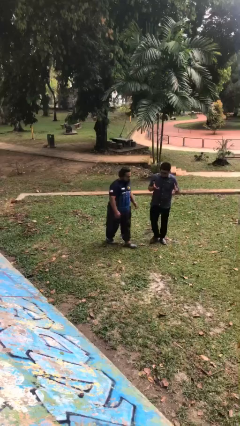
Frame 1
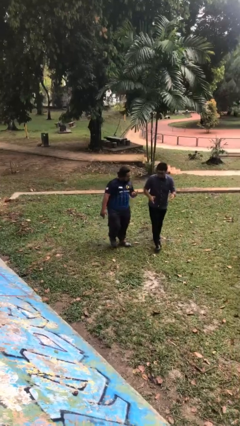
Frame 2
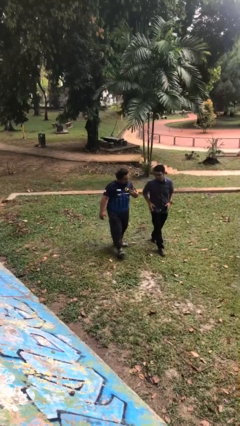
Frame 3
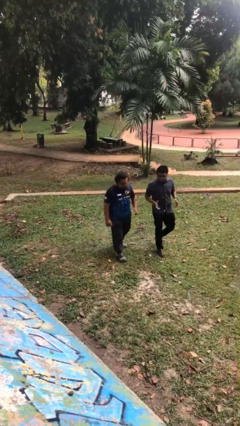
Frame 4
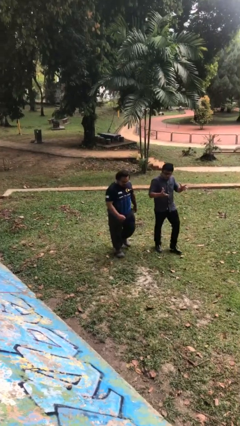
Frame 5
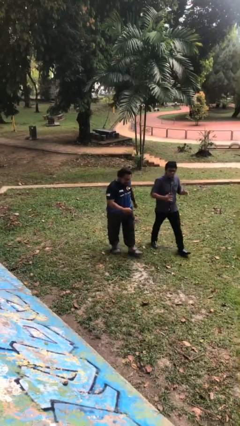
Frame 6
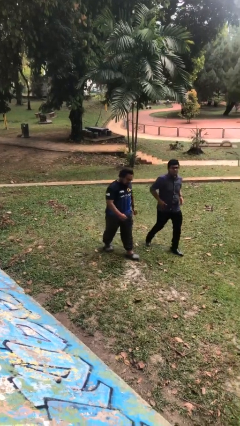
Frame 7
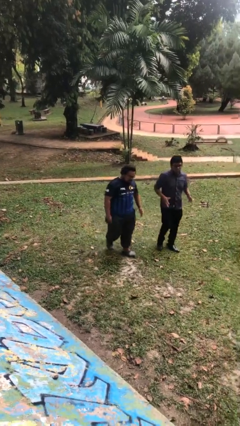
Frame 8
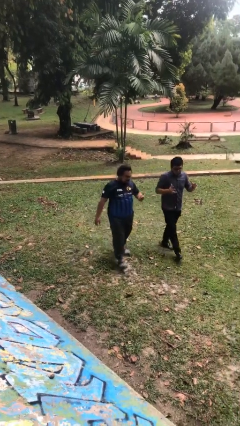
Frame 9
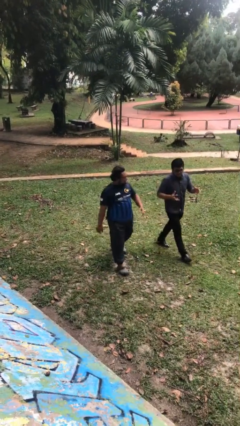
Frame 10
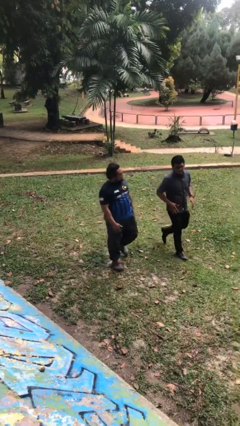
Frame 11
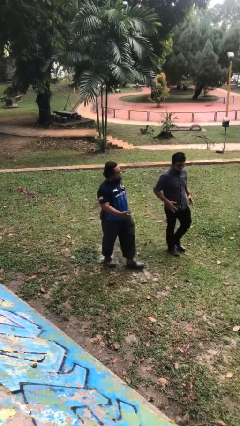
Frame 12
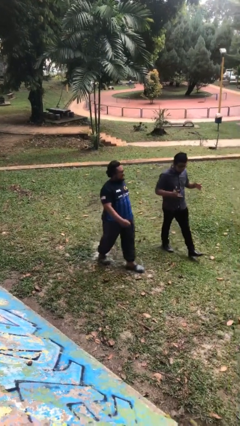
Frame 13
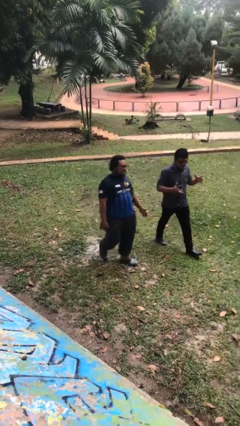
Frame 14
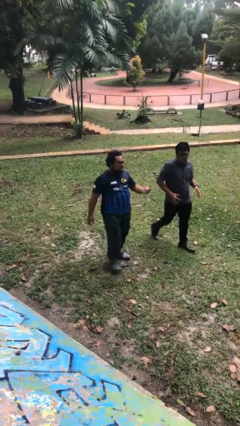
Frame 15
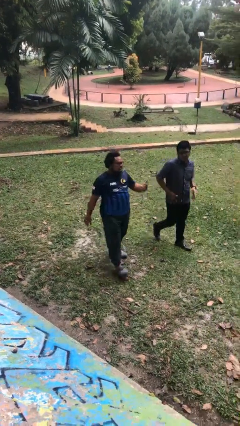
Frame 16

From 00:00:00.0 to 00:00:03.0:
person talks to person

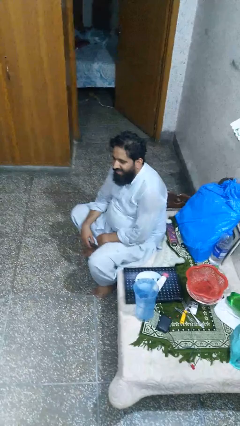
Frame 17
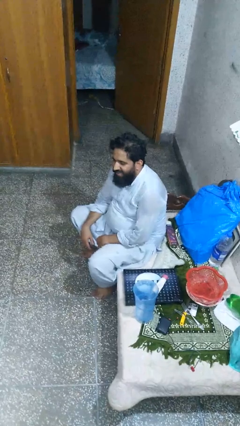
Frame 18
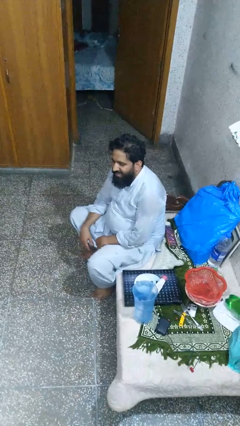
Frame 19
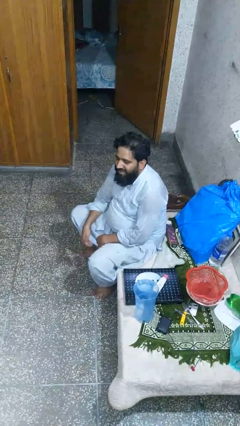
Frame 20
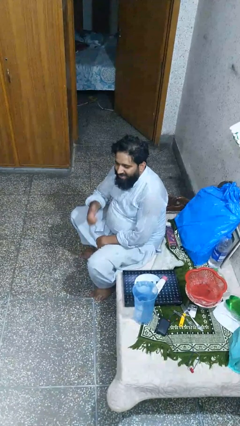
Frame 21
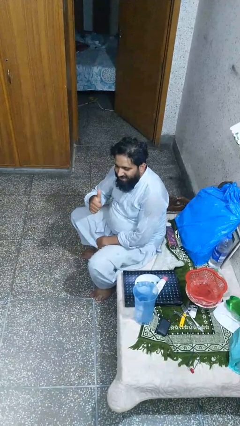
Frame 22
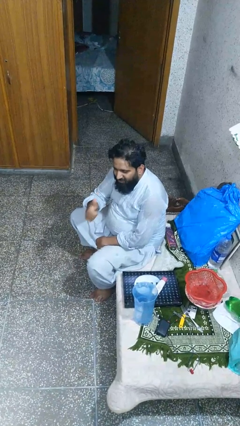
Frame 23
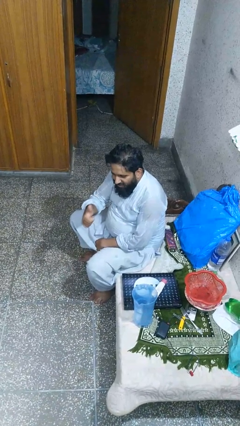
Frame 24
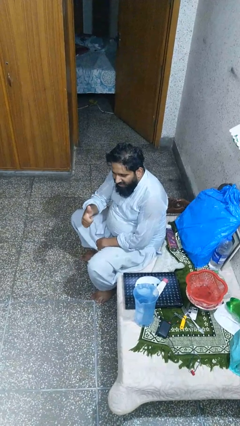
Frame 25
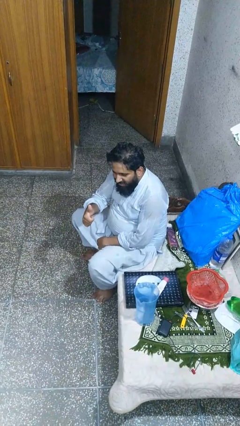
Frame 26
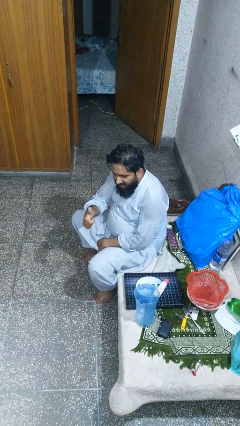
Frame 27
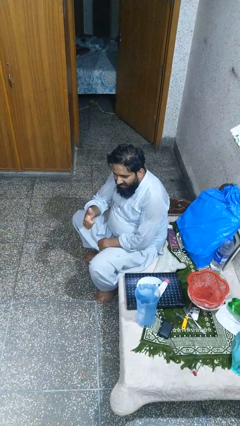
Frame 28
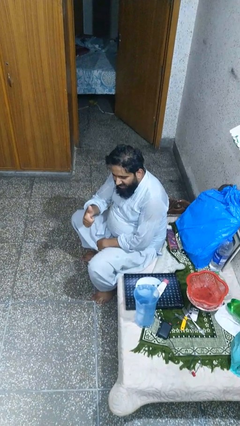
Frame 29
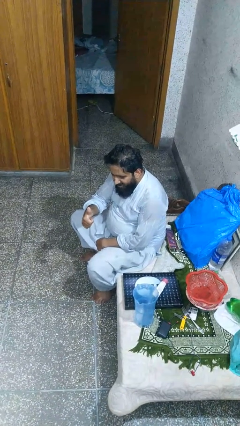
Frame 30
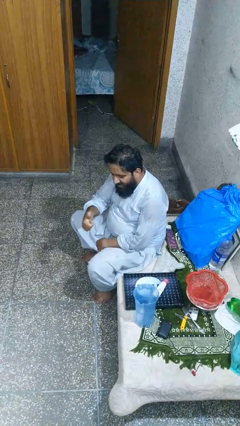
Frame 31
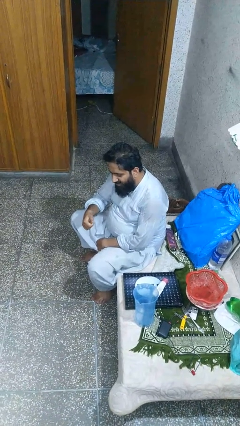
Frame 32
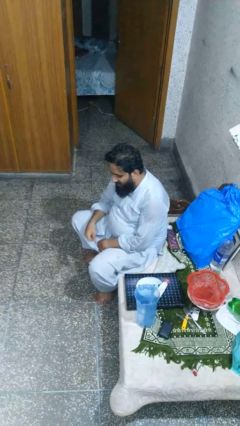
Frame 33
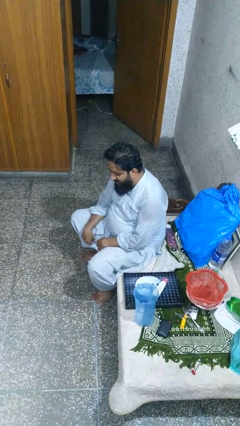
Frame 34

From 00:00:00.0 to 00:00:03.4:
person gestures thumbs up

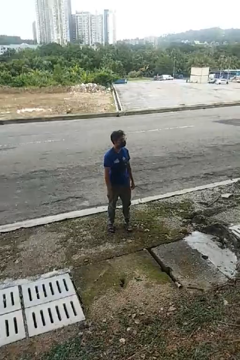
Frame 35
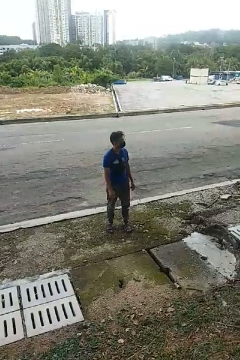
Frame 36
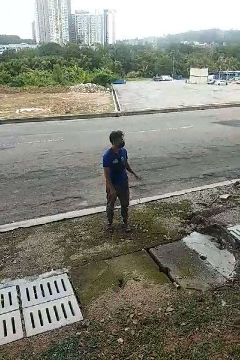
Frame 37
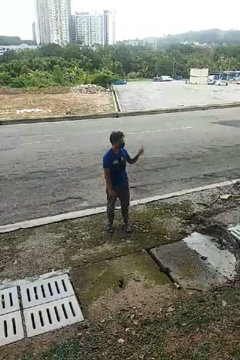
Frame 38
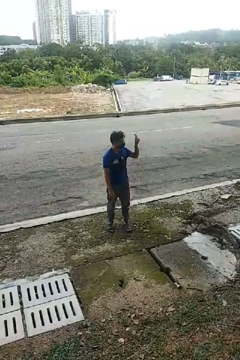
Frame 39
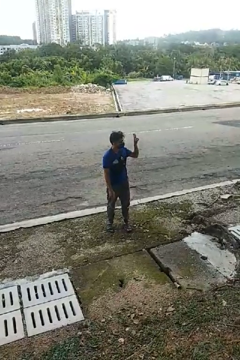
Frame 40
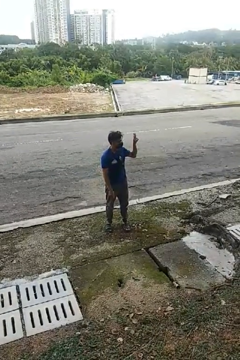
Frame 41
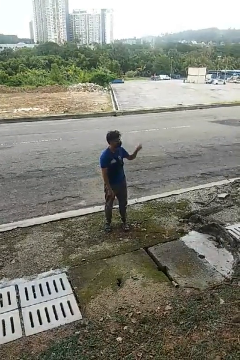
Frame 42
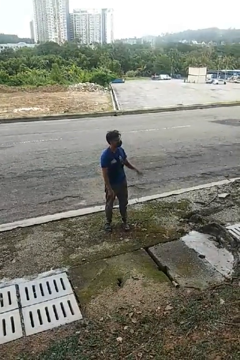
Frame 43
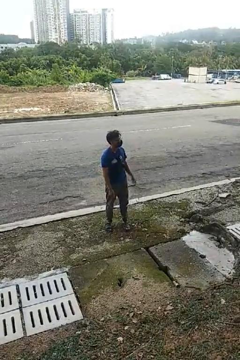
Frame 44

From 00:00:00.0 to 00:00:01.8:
person gestures number three

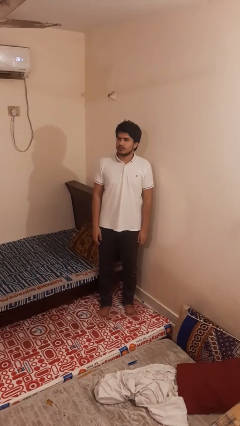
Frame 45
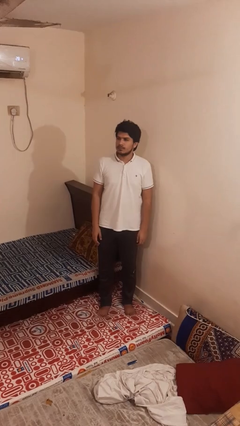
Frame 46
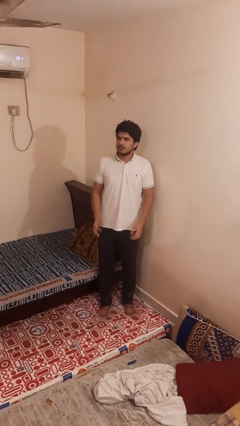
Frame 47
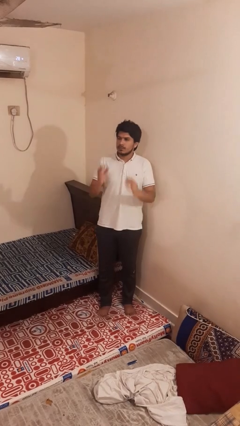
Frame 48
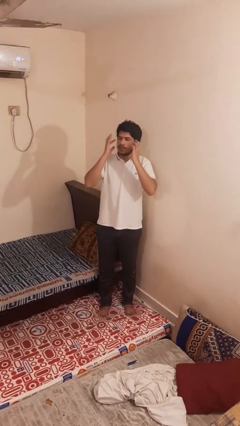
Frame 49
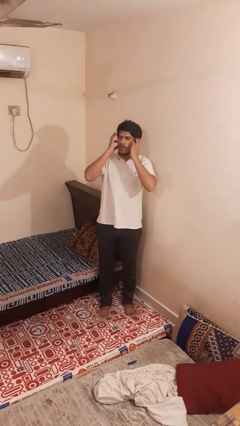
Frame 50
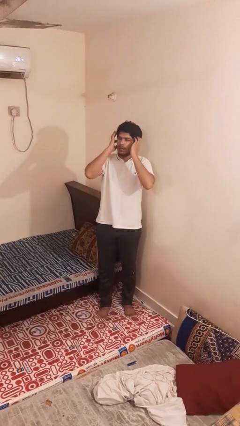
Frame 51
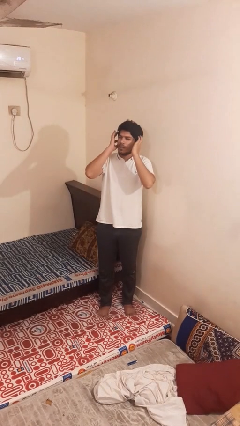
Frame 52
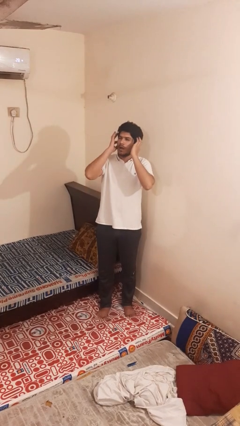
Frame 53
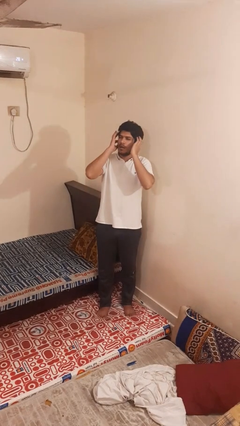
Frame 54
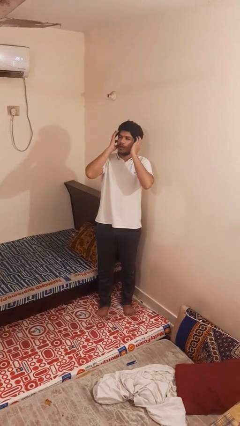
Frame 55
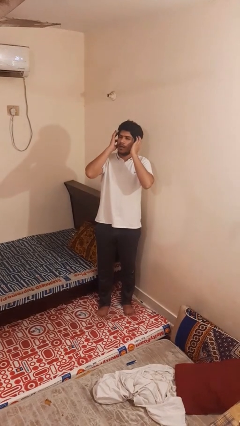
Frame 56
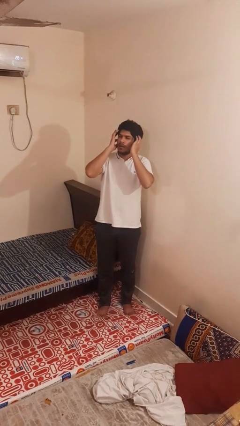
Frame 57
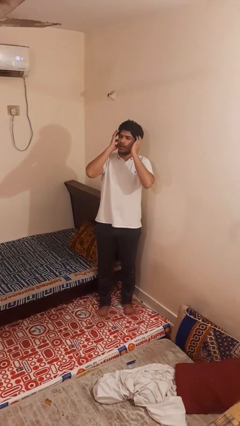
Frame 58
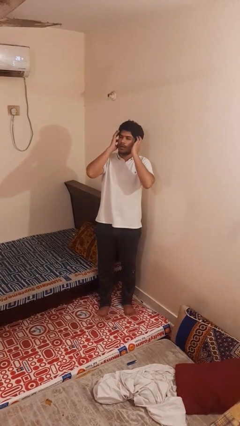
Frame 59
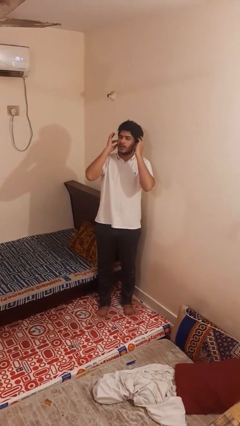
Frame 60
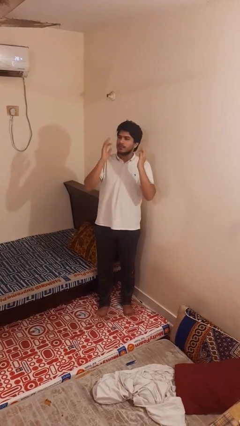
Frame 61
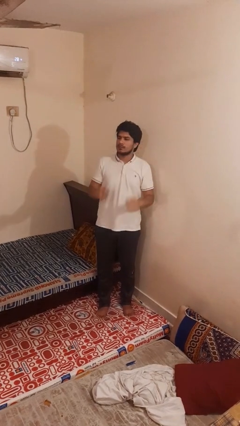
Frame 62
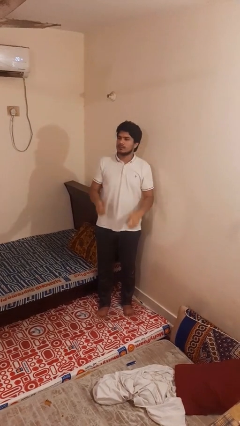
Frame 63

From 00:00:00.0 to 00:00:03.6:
person puts fingers in ear

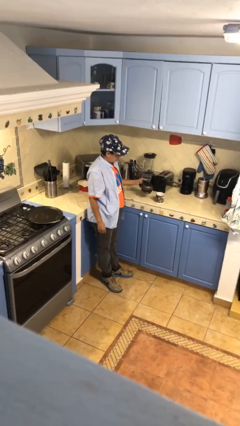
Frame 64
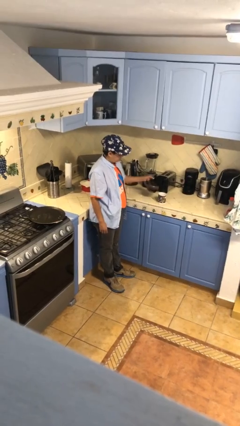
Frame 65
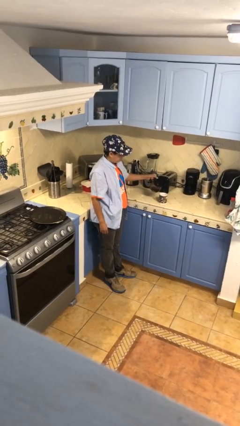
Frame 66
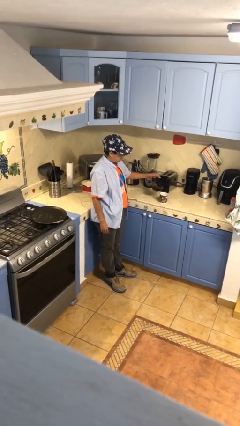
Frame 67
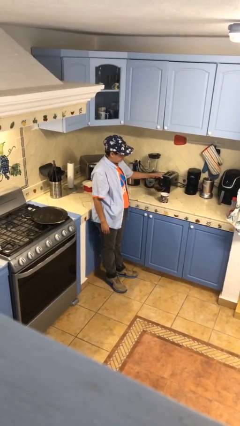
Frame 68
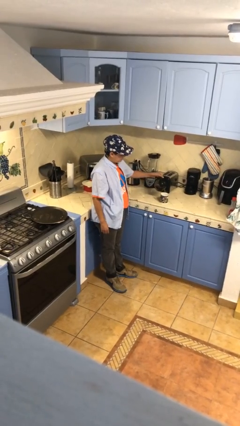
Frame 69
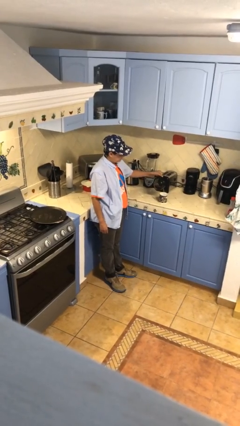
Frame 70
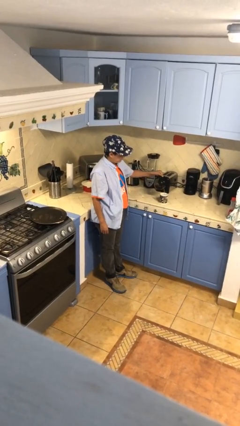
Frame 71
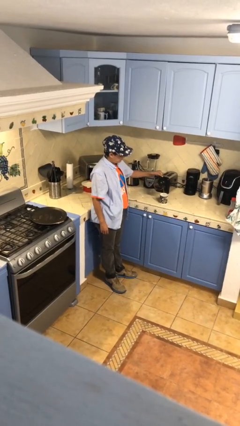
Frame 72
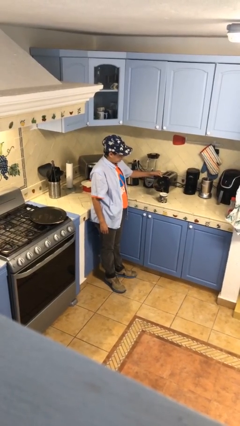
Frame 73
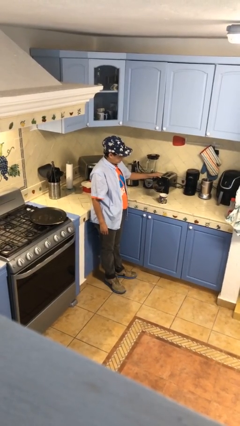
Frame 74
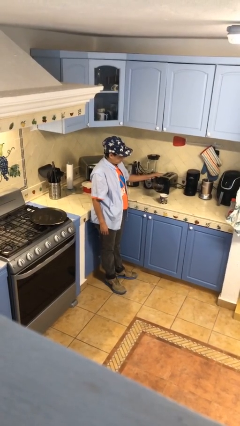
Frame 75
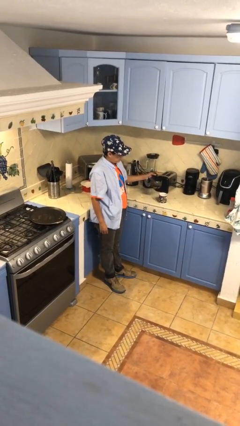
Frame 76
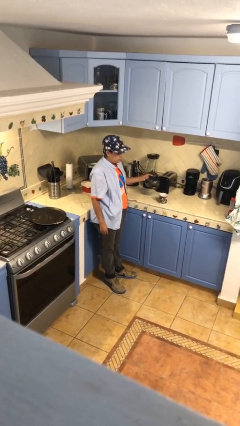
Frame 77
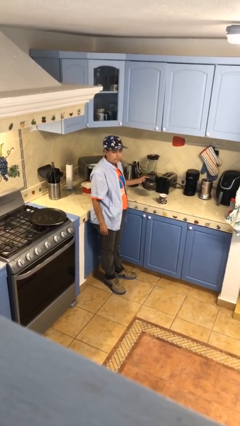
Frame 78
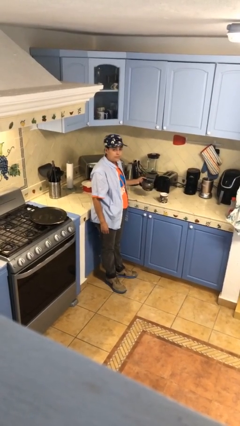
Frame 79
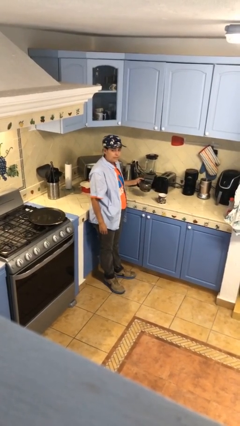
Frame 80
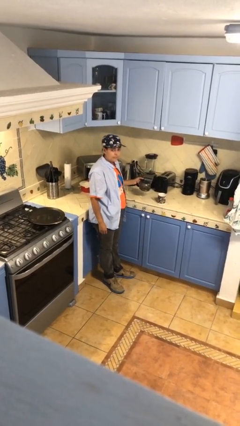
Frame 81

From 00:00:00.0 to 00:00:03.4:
person pours coffee into mug

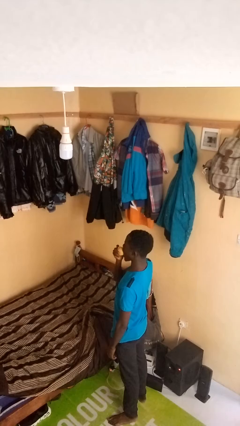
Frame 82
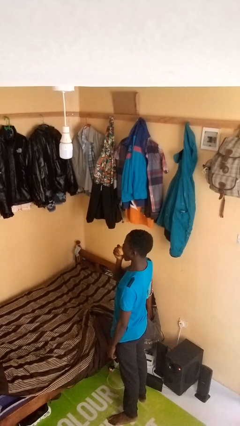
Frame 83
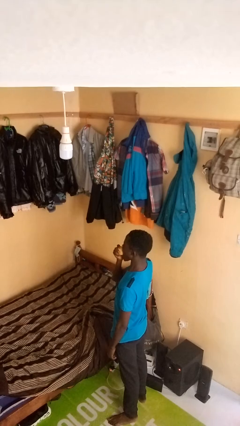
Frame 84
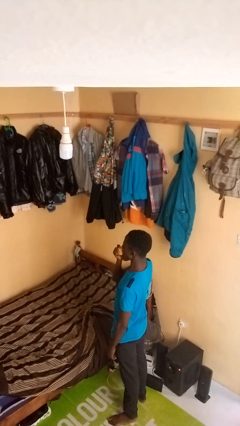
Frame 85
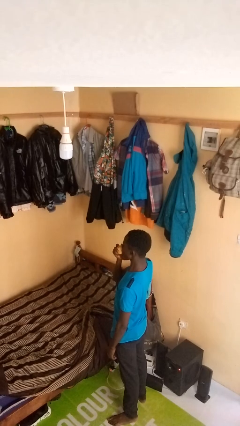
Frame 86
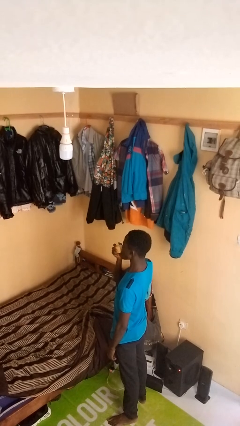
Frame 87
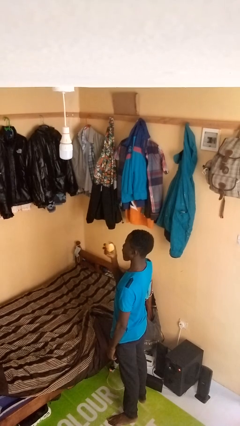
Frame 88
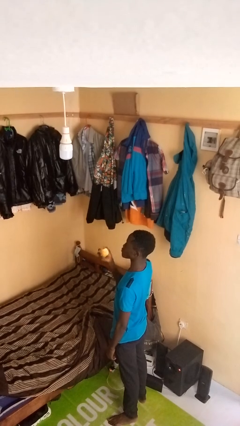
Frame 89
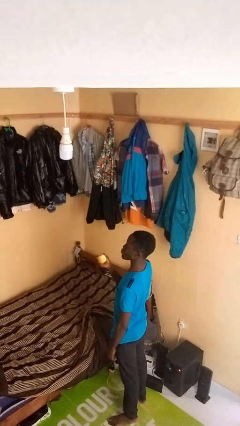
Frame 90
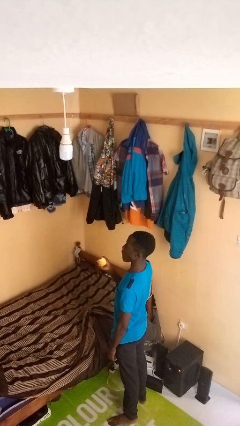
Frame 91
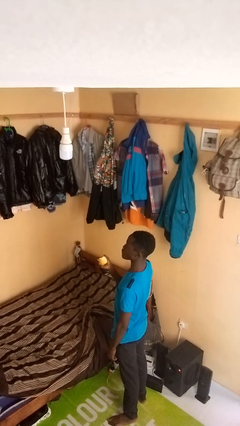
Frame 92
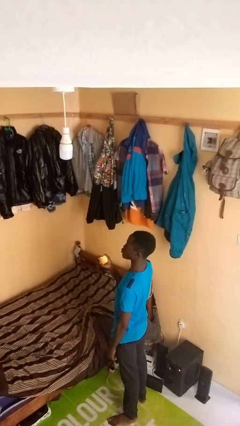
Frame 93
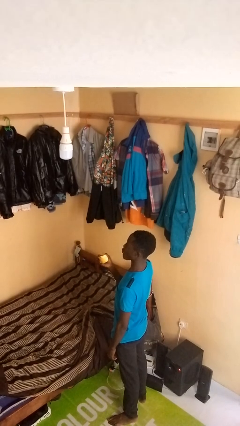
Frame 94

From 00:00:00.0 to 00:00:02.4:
person eats apple
